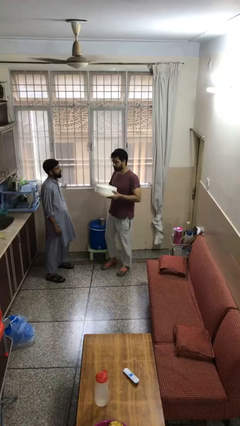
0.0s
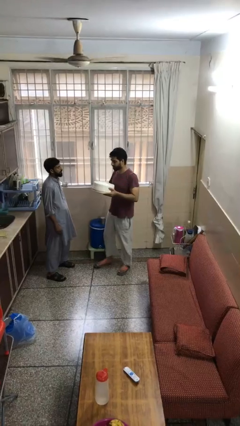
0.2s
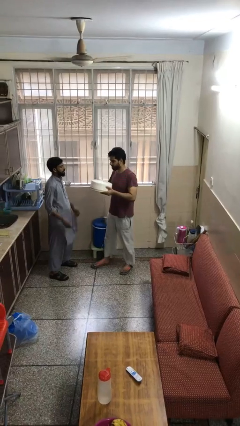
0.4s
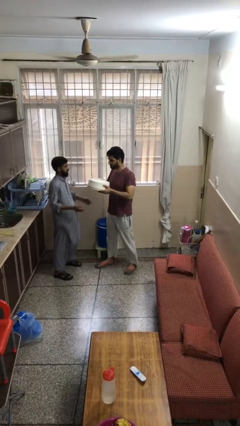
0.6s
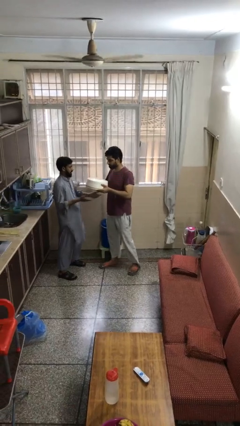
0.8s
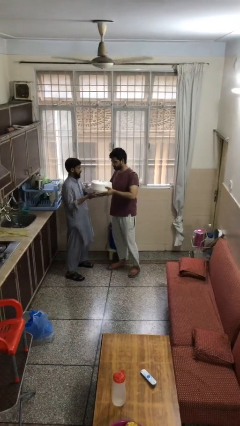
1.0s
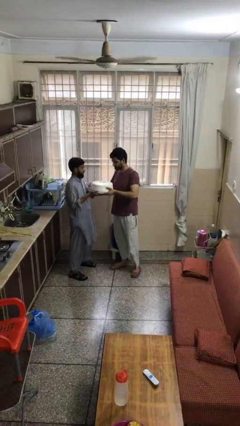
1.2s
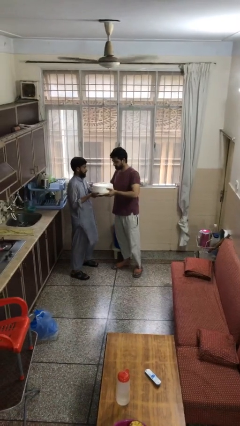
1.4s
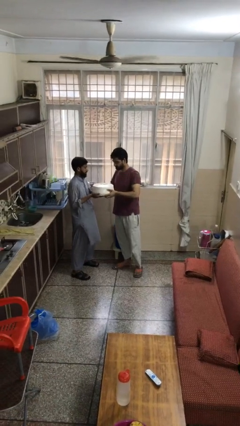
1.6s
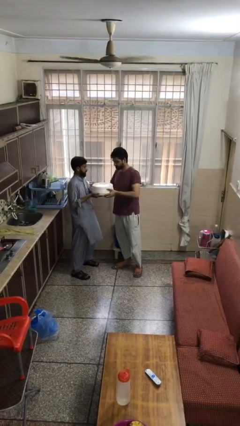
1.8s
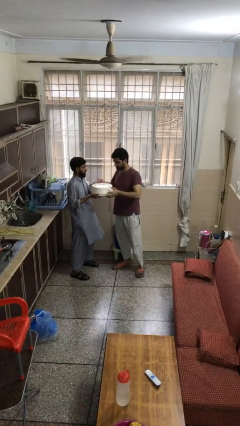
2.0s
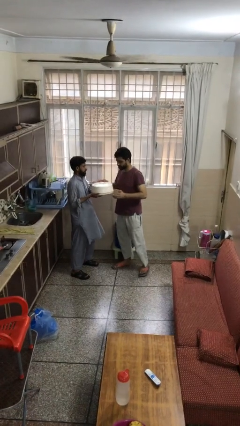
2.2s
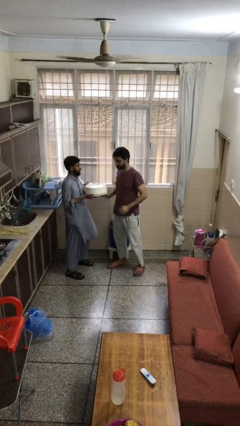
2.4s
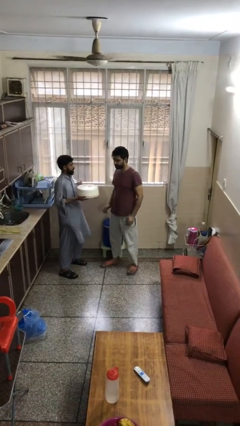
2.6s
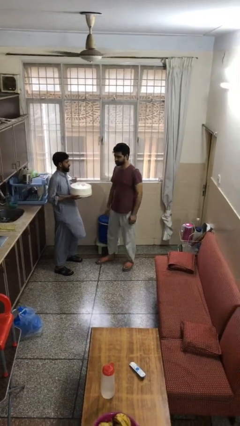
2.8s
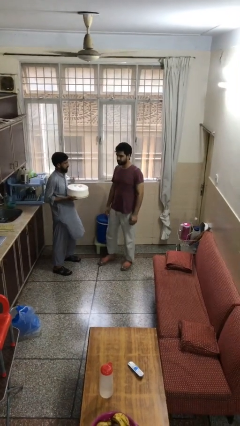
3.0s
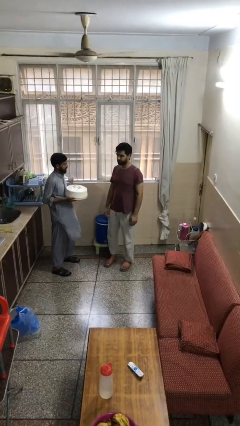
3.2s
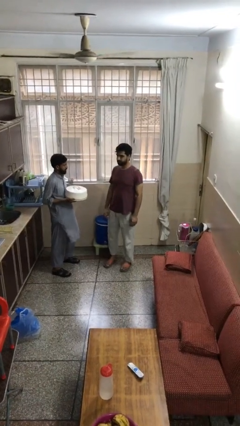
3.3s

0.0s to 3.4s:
person transfers object to person

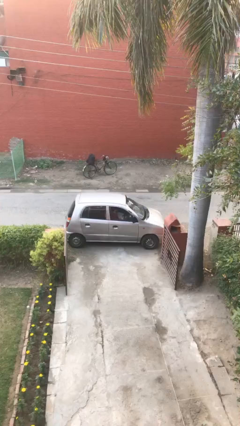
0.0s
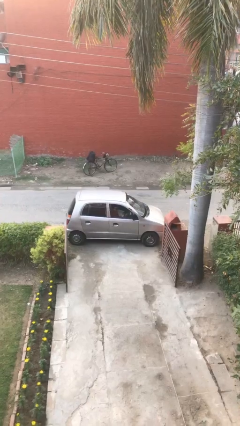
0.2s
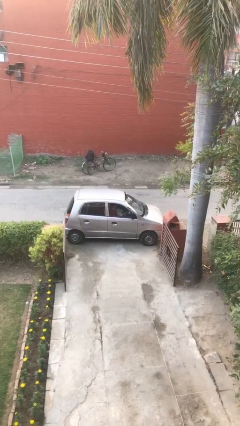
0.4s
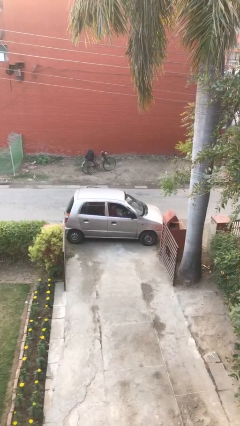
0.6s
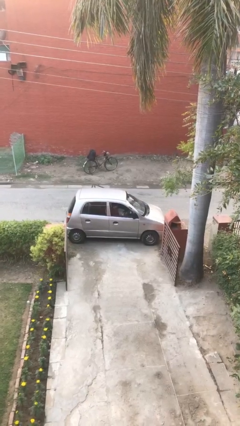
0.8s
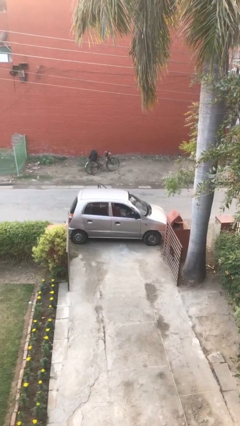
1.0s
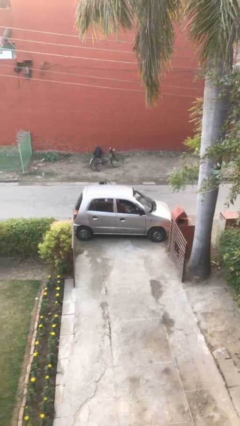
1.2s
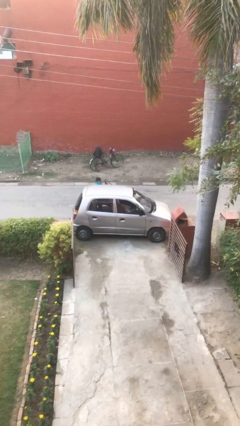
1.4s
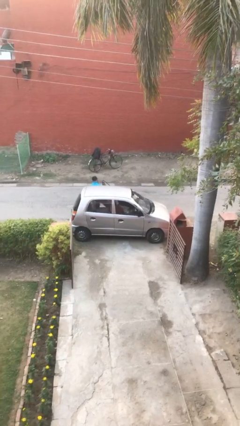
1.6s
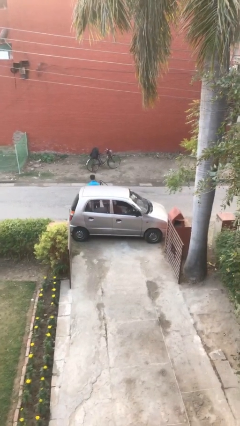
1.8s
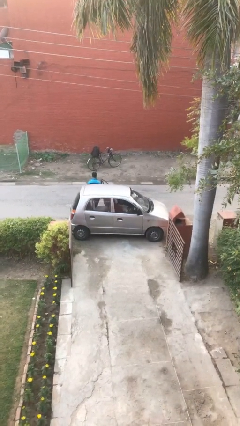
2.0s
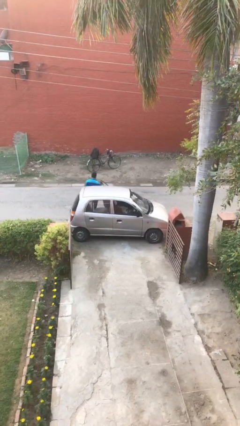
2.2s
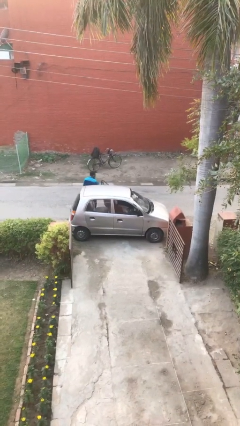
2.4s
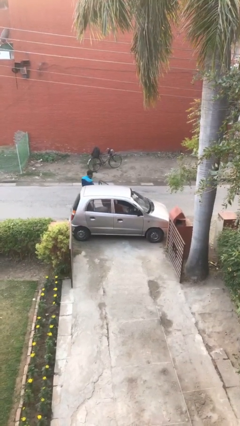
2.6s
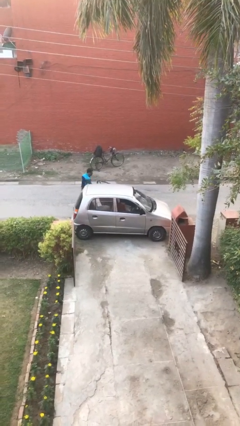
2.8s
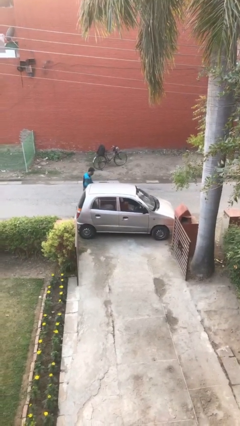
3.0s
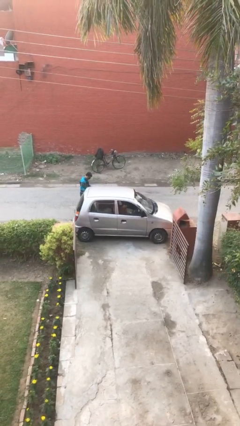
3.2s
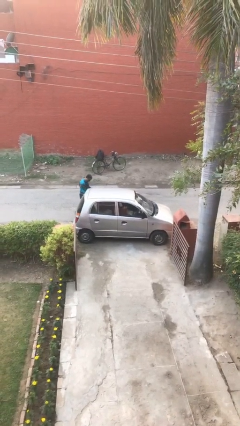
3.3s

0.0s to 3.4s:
car drops off person

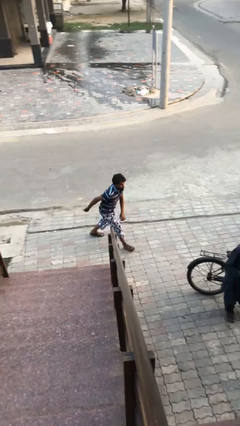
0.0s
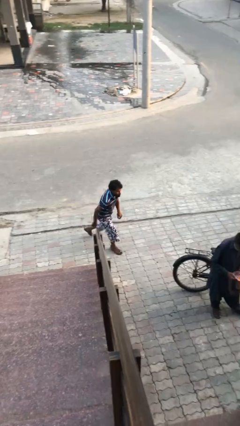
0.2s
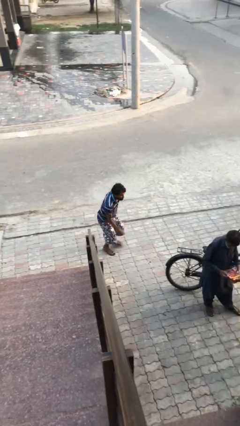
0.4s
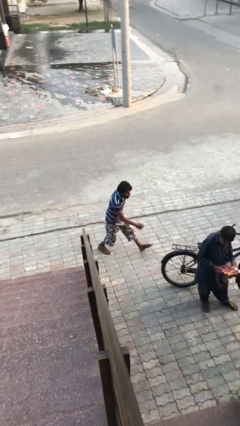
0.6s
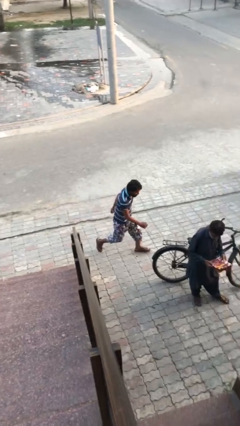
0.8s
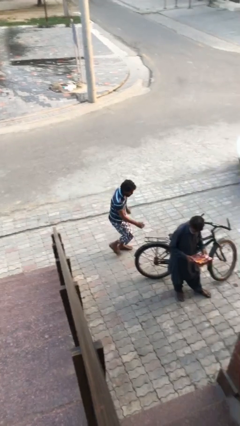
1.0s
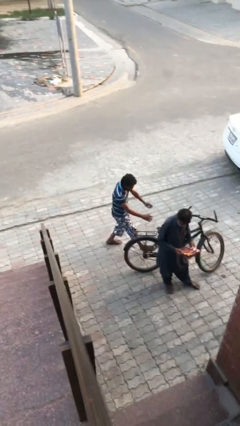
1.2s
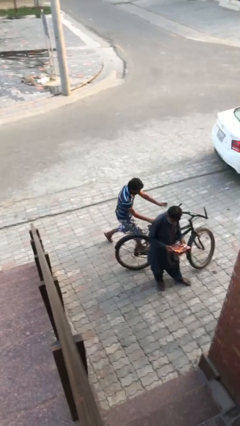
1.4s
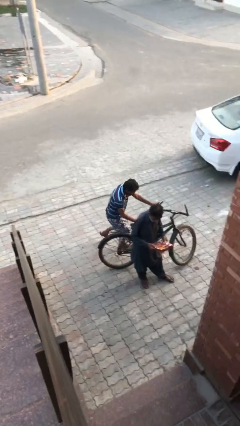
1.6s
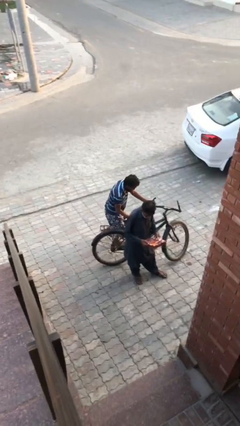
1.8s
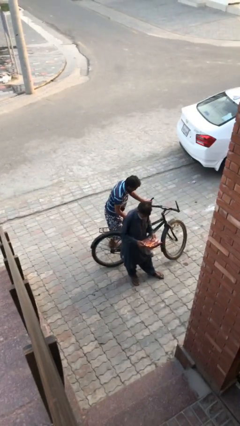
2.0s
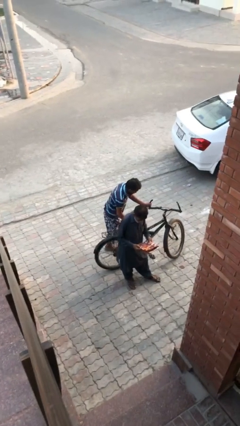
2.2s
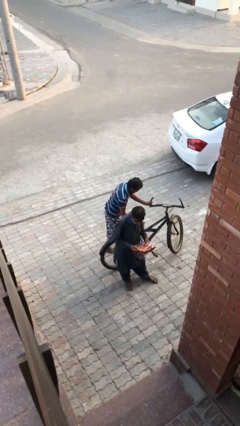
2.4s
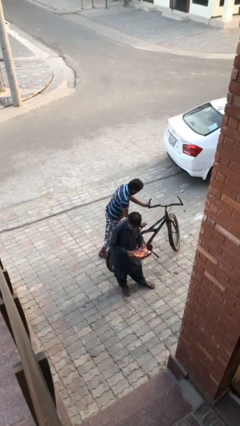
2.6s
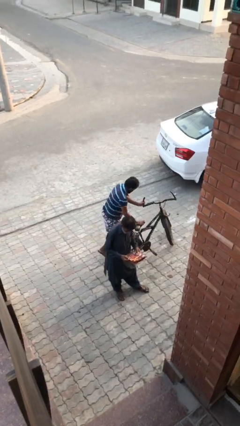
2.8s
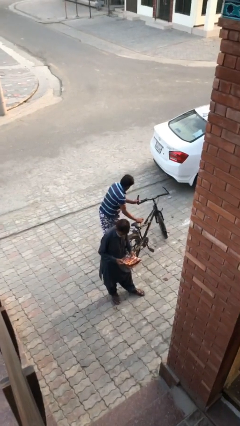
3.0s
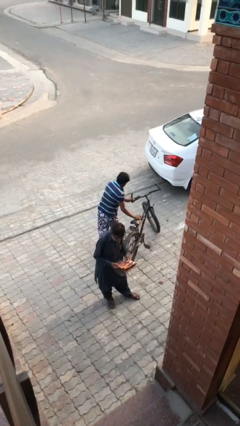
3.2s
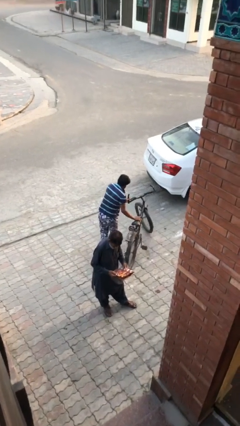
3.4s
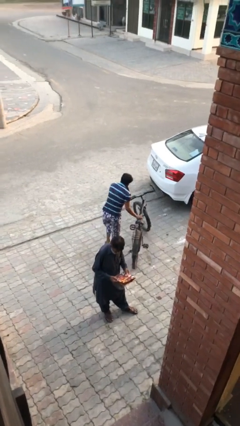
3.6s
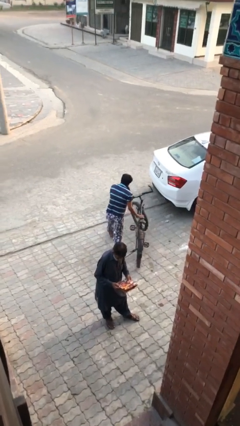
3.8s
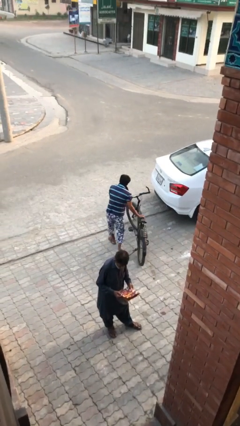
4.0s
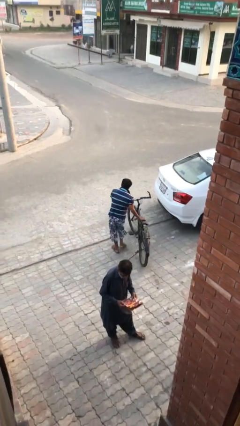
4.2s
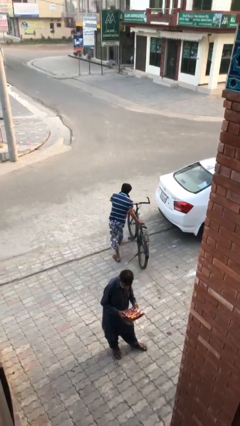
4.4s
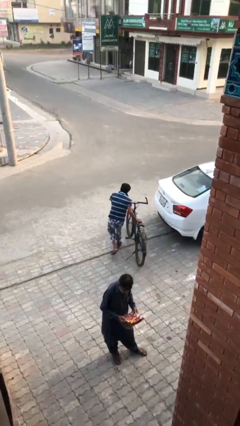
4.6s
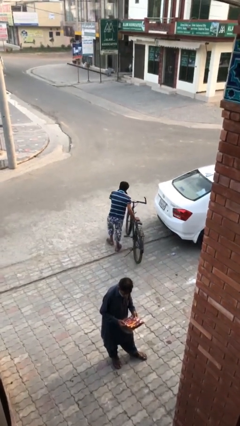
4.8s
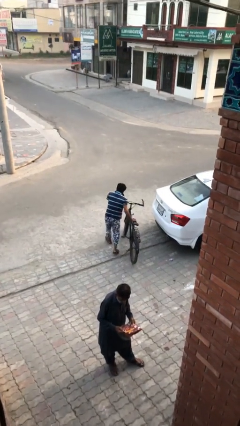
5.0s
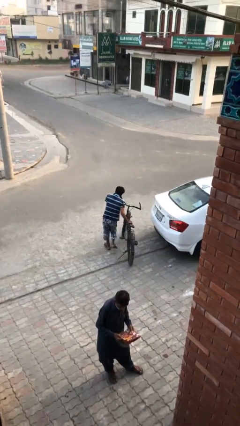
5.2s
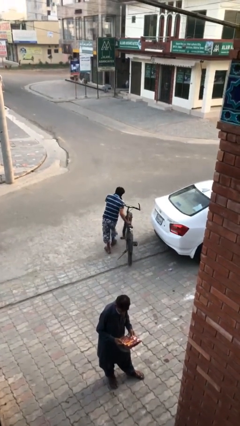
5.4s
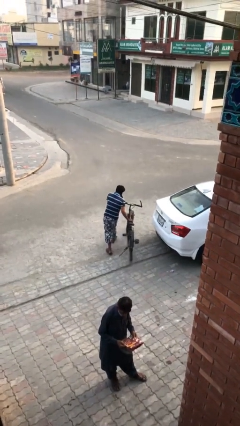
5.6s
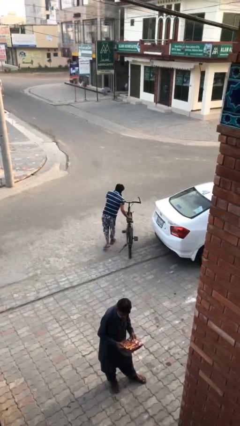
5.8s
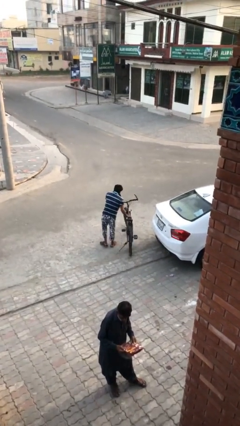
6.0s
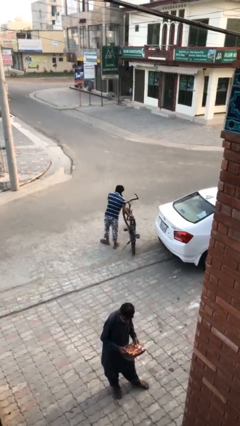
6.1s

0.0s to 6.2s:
person steals object from person

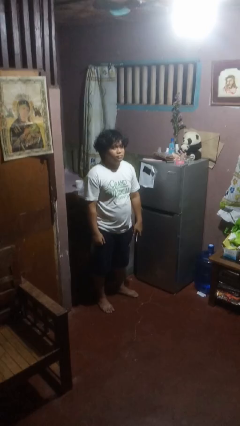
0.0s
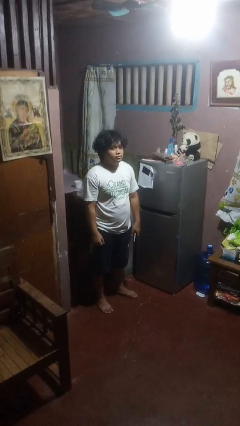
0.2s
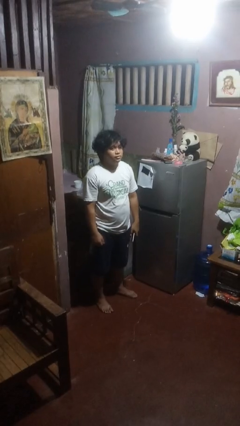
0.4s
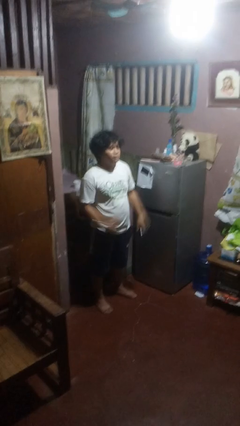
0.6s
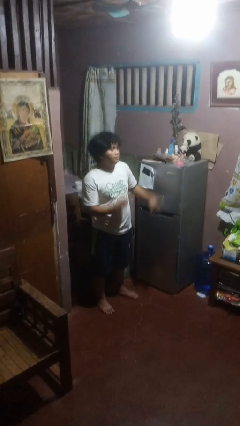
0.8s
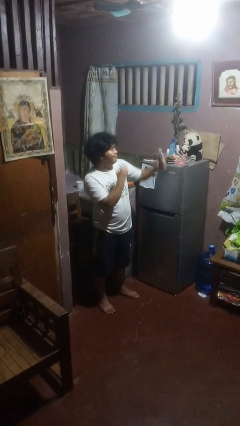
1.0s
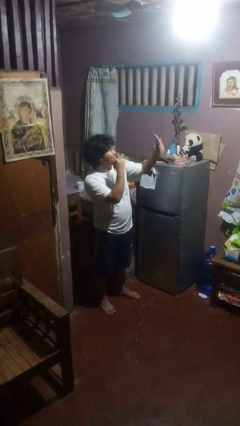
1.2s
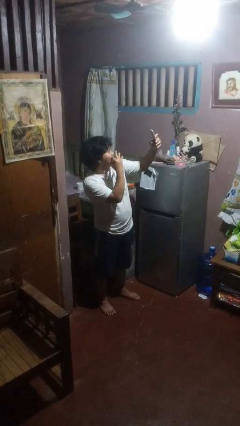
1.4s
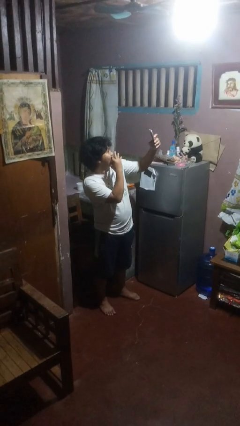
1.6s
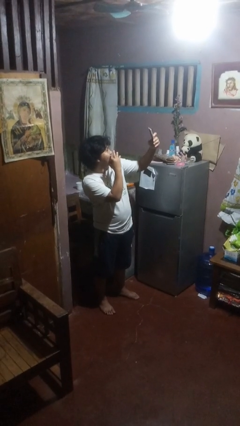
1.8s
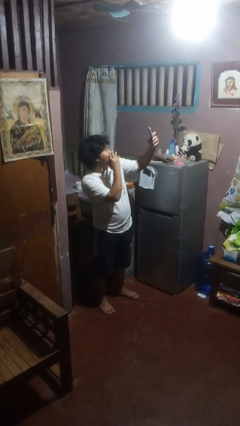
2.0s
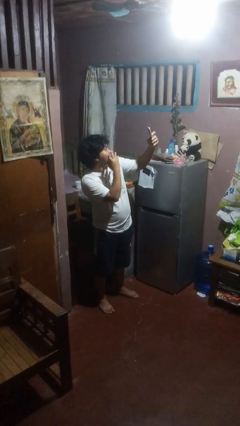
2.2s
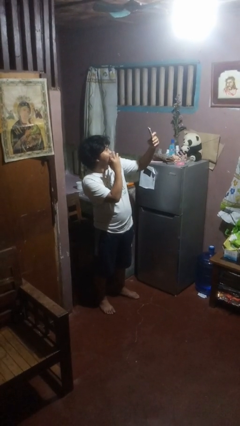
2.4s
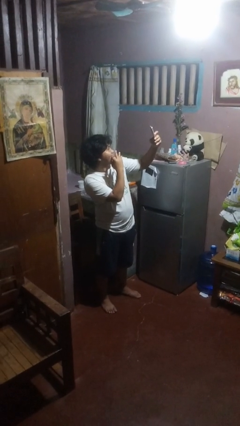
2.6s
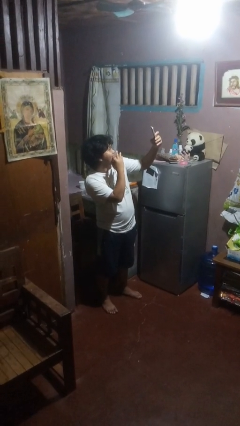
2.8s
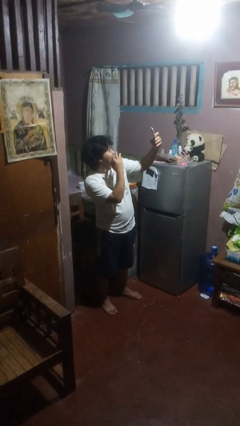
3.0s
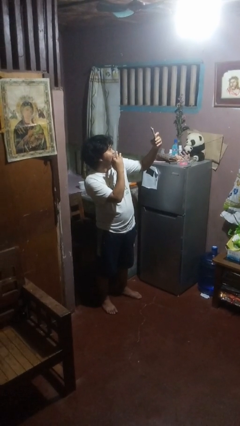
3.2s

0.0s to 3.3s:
person takes selfie

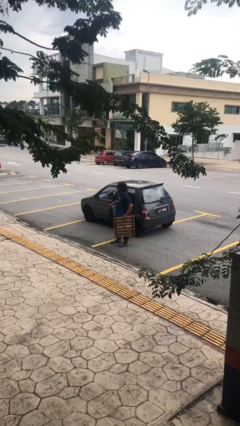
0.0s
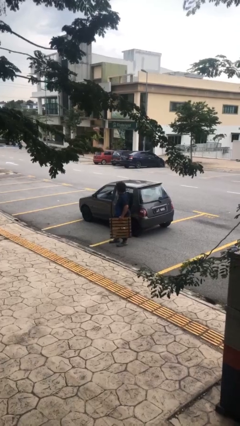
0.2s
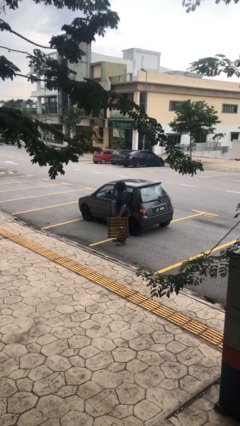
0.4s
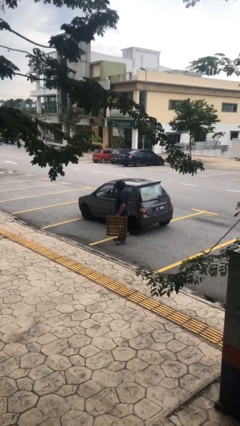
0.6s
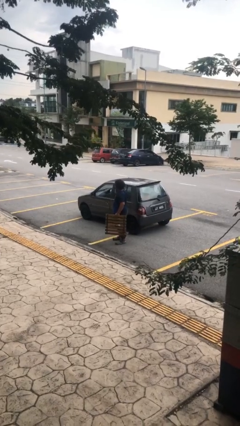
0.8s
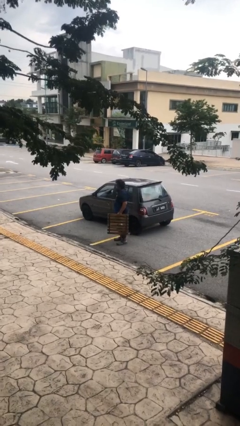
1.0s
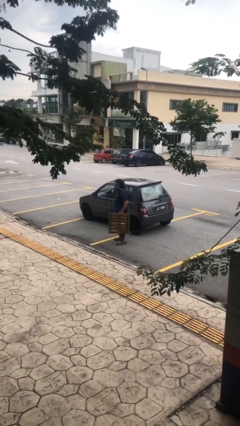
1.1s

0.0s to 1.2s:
person closes car door

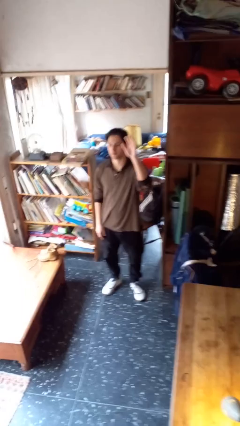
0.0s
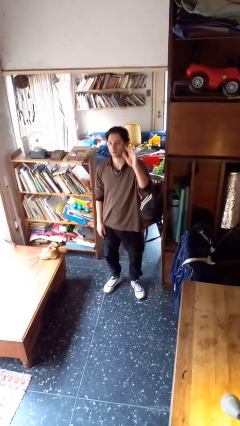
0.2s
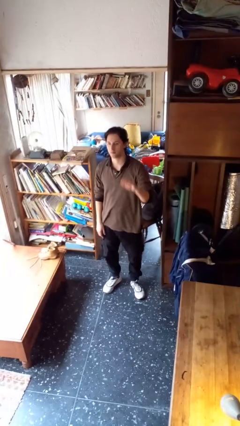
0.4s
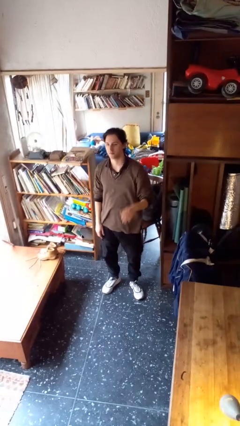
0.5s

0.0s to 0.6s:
person gestures lower hand
